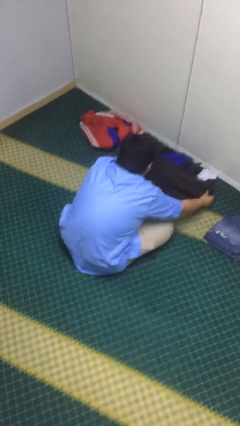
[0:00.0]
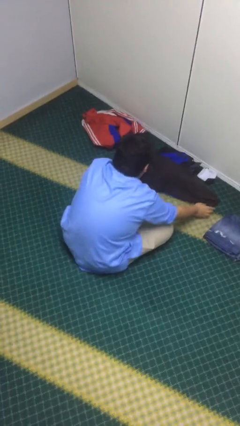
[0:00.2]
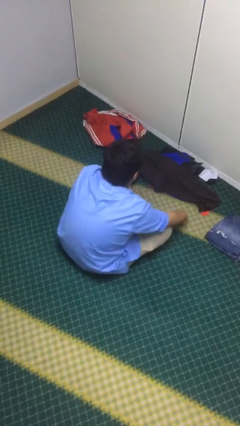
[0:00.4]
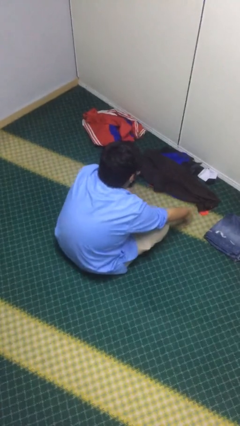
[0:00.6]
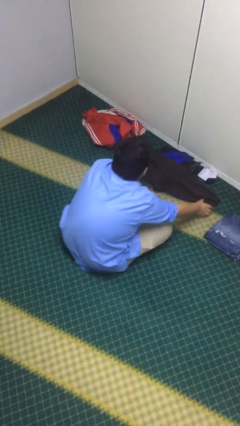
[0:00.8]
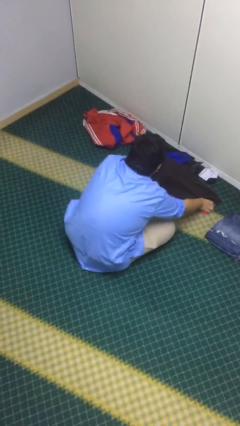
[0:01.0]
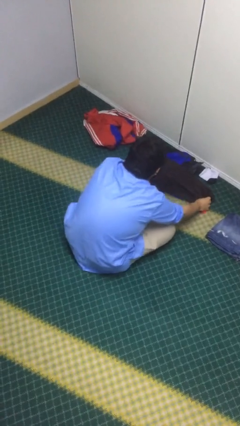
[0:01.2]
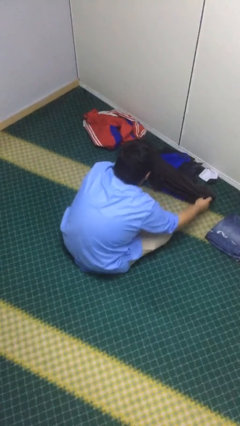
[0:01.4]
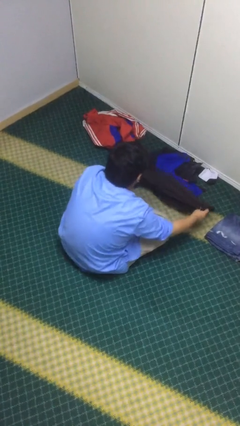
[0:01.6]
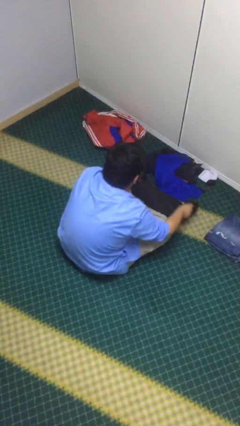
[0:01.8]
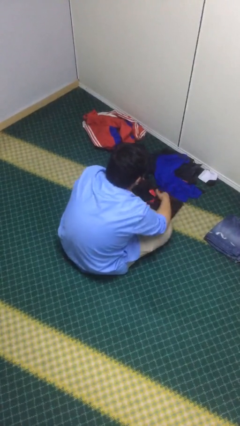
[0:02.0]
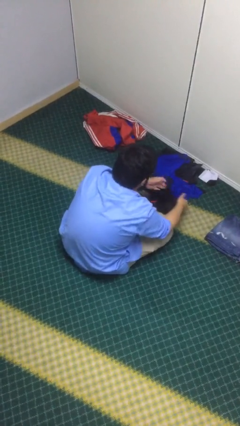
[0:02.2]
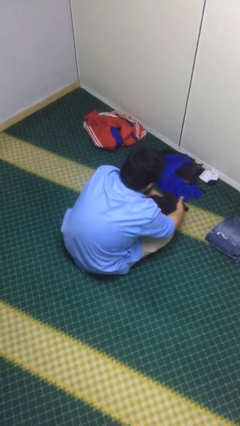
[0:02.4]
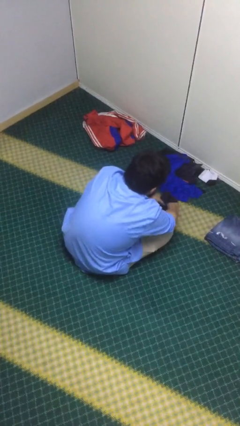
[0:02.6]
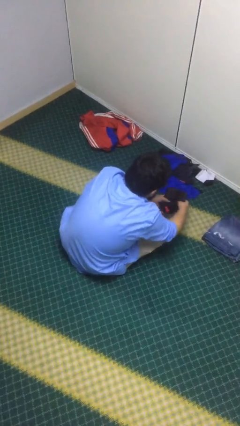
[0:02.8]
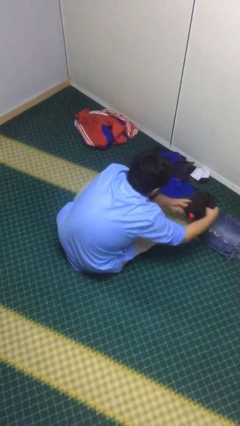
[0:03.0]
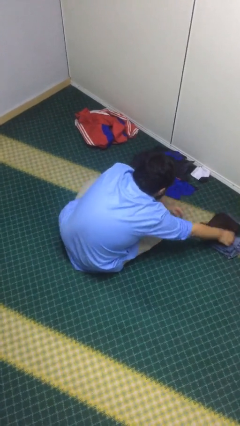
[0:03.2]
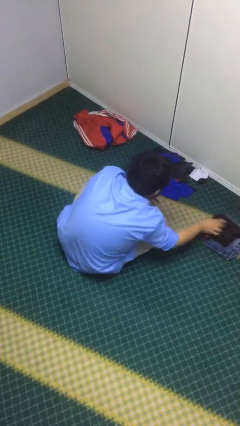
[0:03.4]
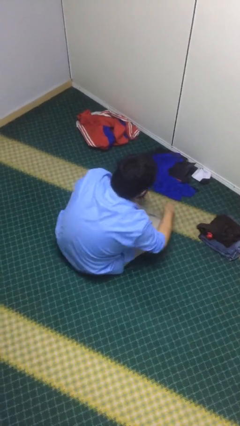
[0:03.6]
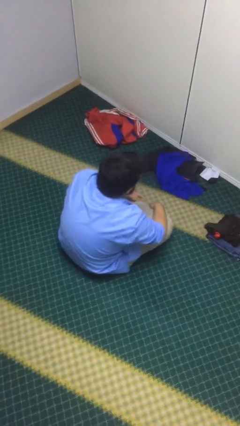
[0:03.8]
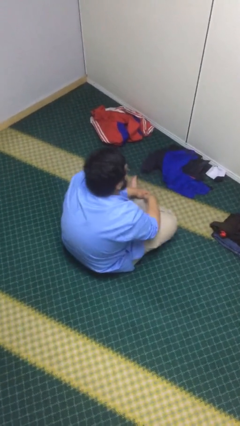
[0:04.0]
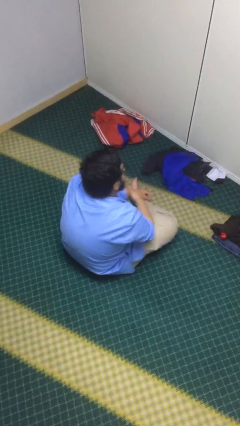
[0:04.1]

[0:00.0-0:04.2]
person folds shirt

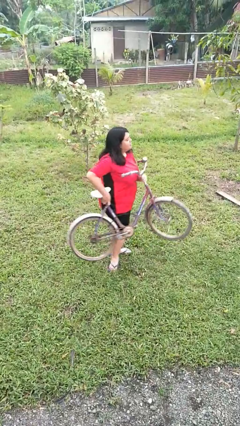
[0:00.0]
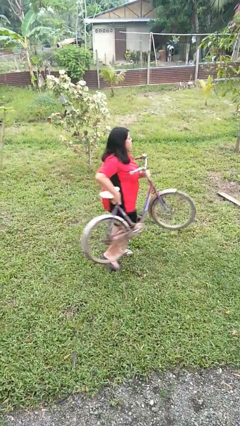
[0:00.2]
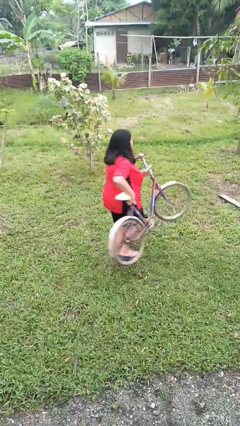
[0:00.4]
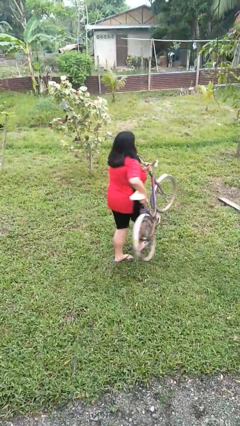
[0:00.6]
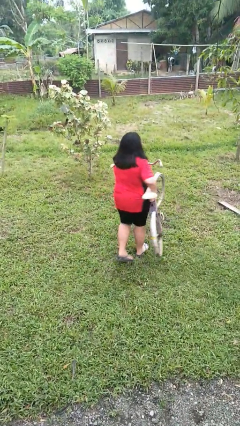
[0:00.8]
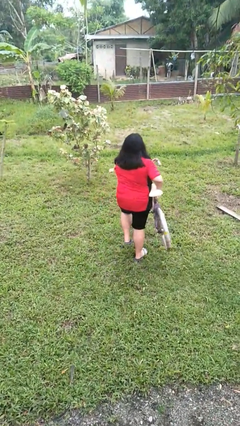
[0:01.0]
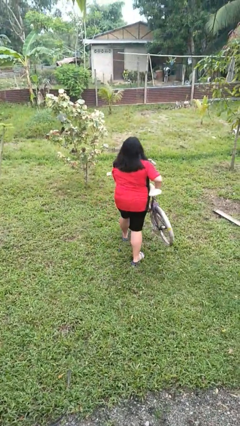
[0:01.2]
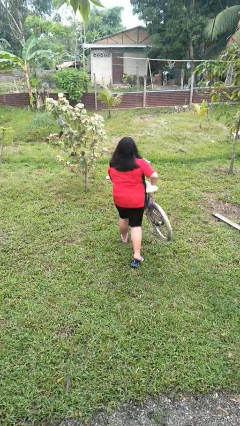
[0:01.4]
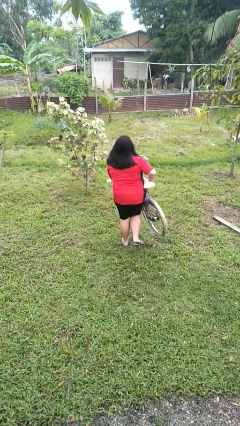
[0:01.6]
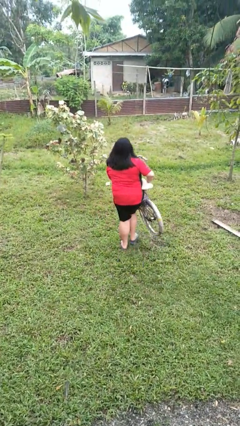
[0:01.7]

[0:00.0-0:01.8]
person carries bicycle

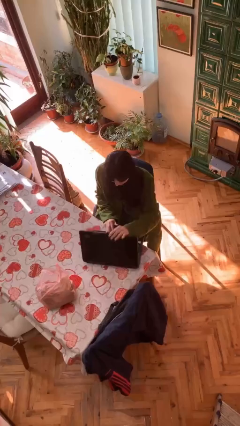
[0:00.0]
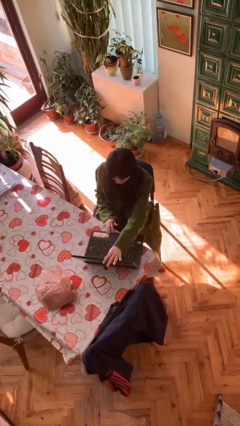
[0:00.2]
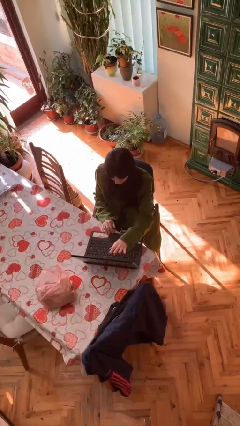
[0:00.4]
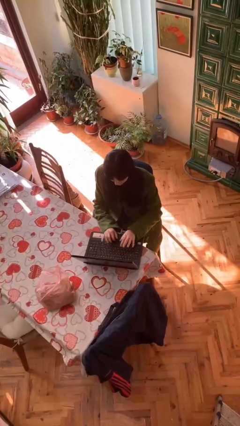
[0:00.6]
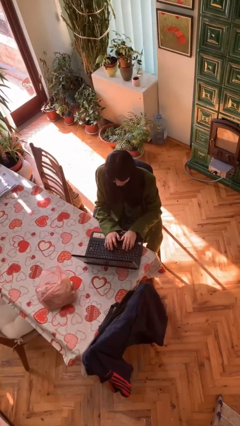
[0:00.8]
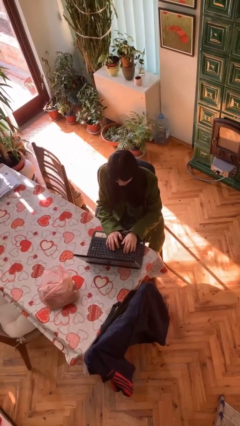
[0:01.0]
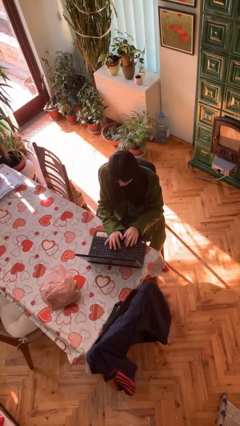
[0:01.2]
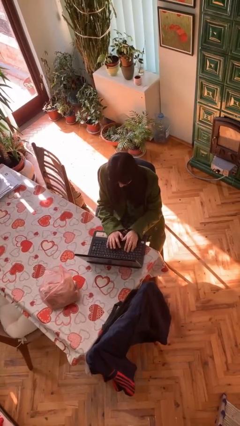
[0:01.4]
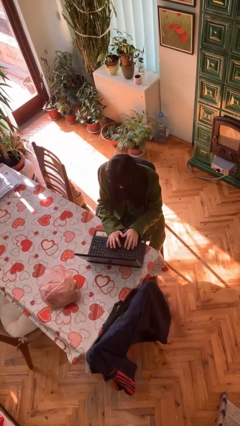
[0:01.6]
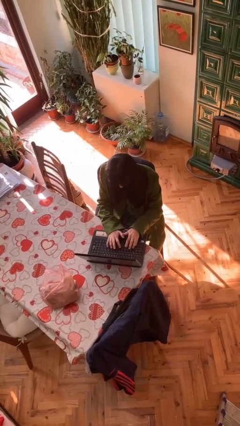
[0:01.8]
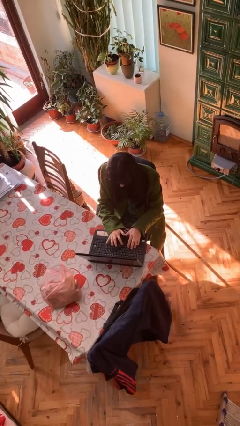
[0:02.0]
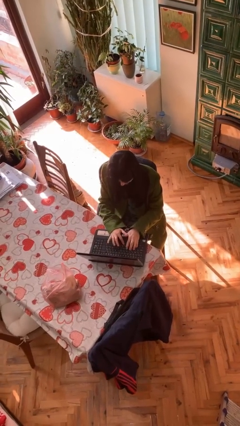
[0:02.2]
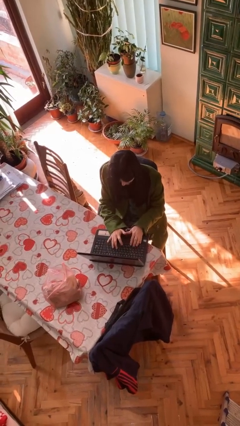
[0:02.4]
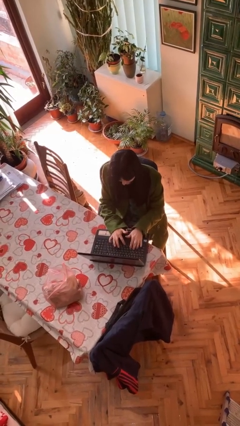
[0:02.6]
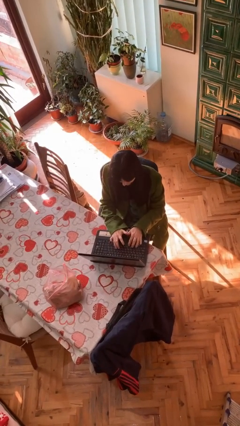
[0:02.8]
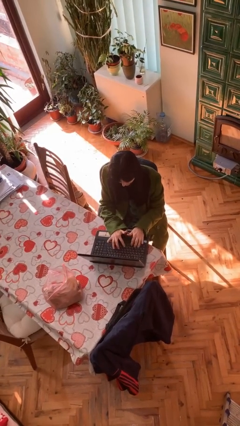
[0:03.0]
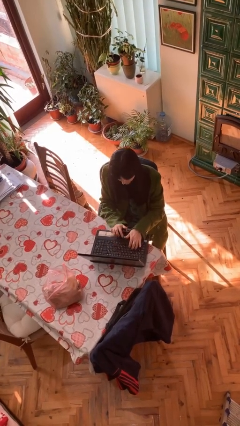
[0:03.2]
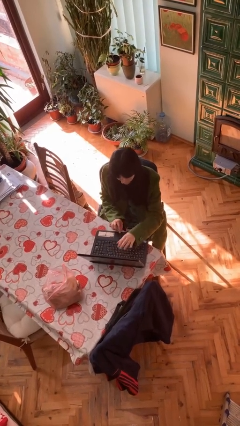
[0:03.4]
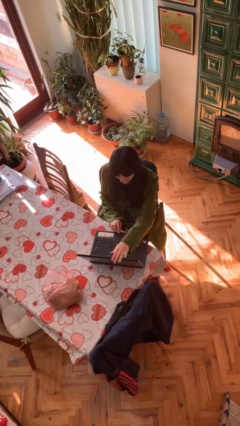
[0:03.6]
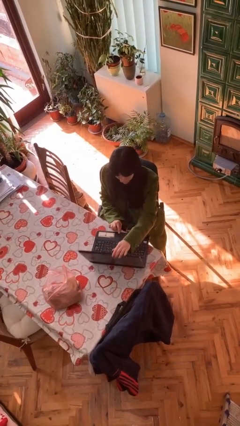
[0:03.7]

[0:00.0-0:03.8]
person interacts with laptop

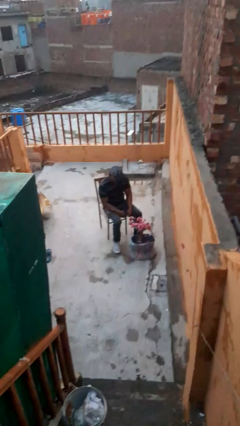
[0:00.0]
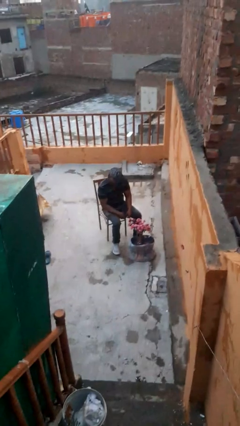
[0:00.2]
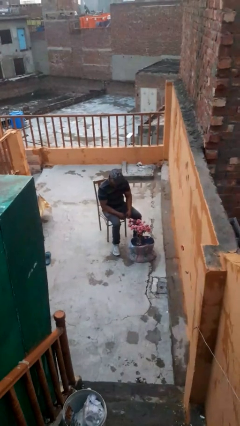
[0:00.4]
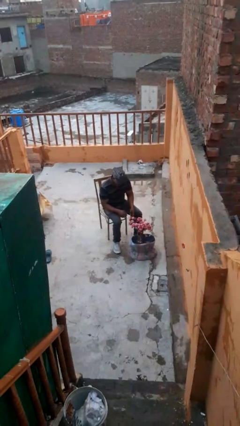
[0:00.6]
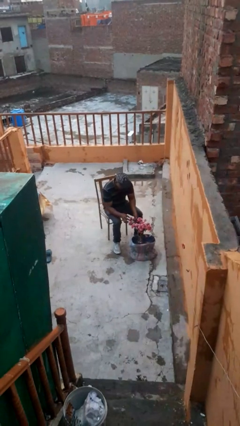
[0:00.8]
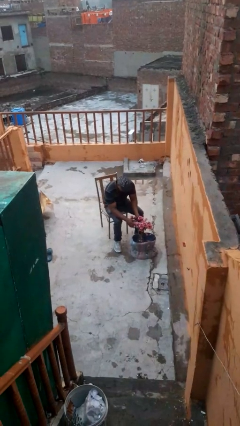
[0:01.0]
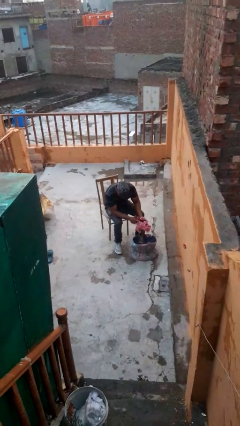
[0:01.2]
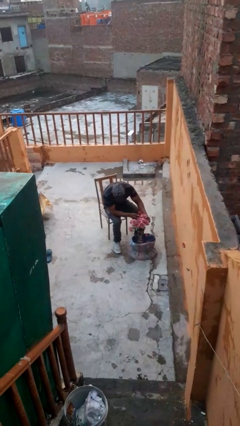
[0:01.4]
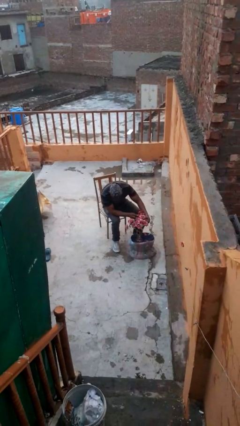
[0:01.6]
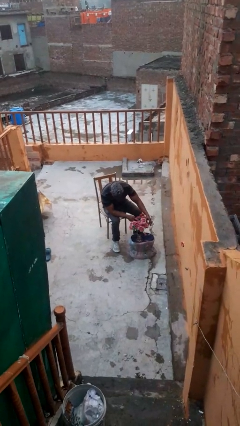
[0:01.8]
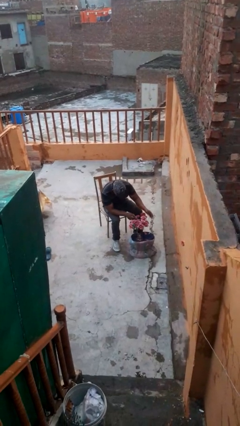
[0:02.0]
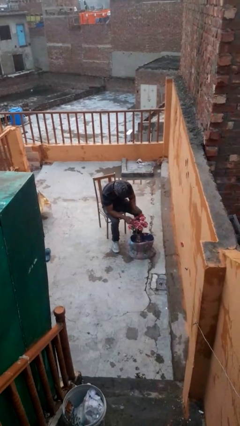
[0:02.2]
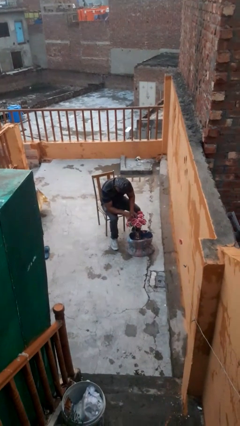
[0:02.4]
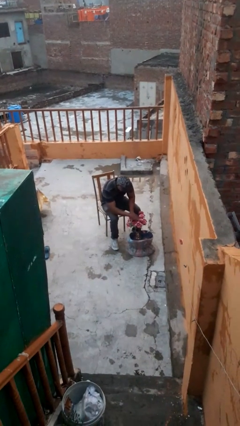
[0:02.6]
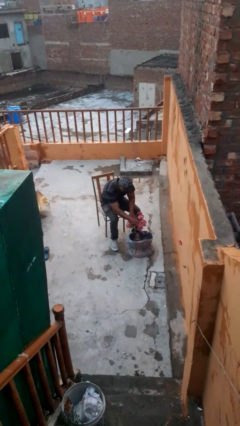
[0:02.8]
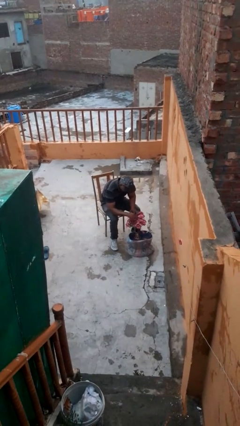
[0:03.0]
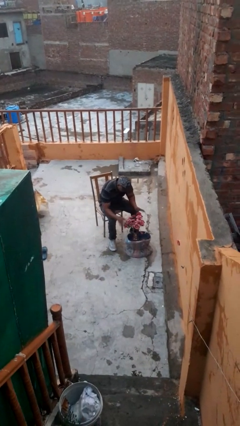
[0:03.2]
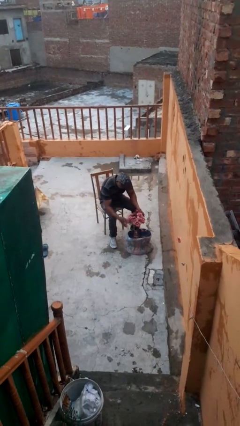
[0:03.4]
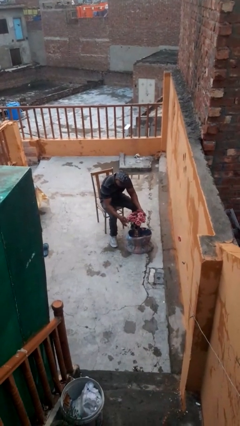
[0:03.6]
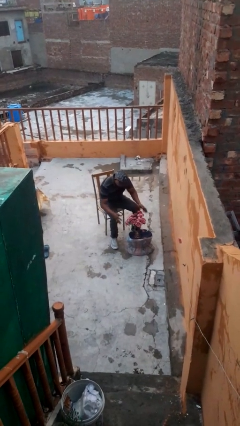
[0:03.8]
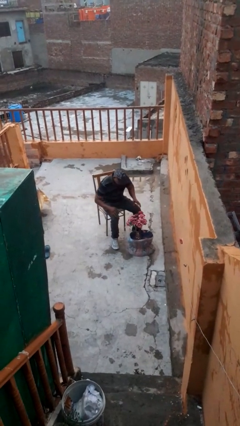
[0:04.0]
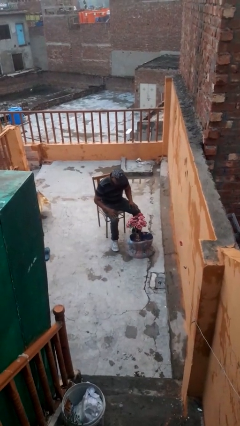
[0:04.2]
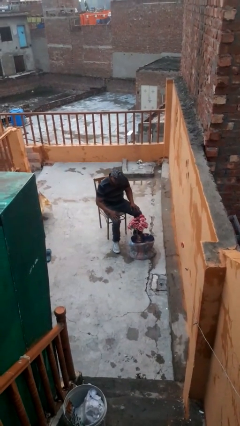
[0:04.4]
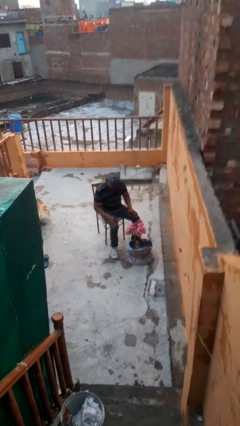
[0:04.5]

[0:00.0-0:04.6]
person arranges flowers in vase

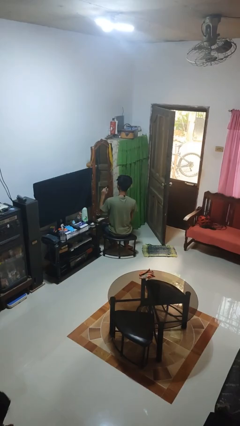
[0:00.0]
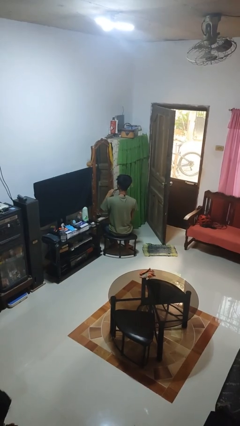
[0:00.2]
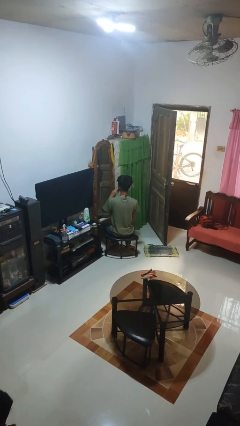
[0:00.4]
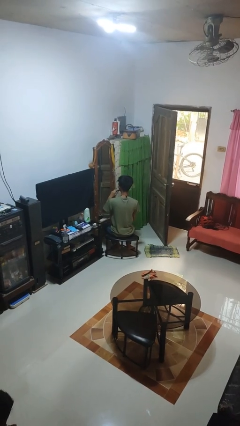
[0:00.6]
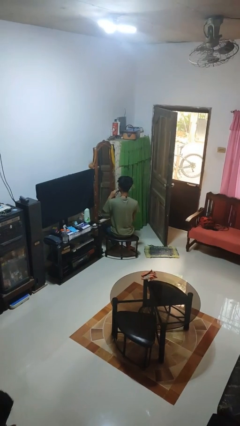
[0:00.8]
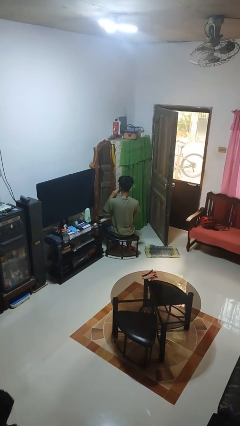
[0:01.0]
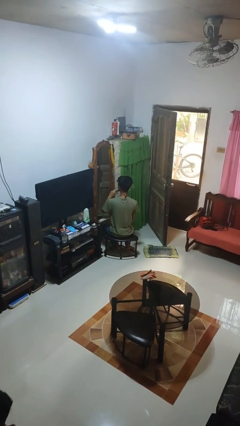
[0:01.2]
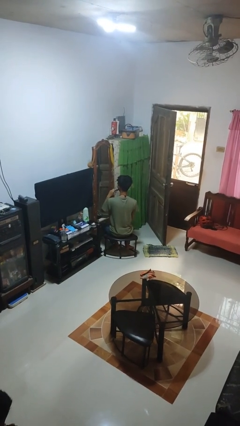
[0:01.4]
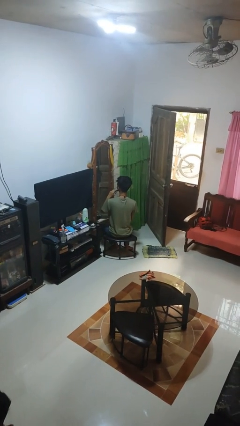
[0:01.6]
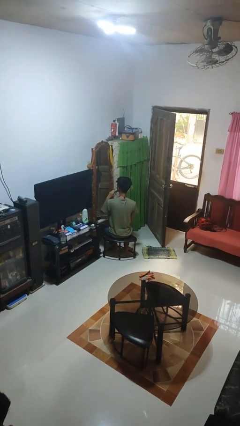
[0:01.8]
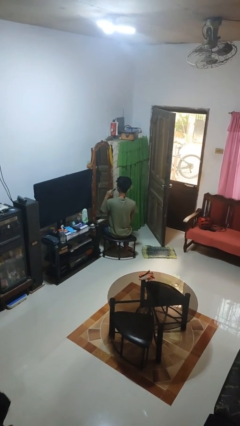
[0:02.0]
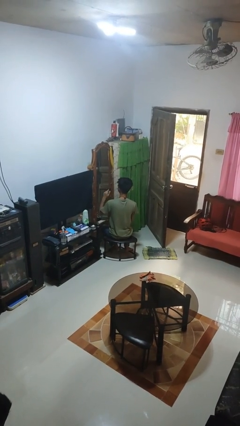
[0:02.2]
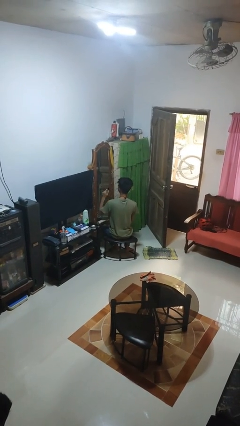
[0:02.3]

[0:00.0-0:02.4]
person applies lip makeup

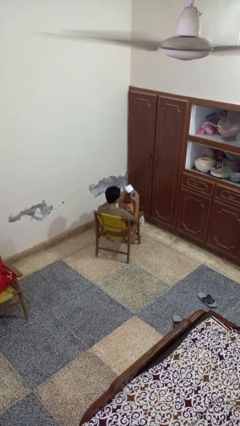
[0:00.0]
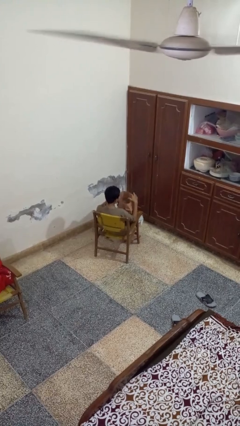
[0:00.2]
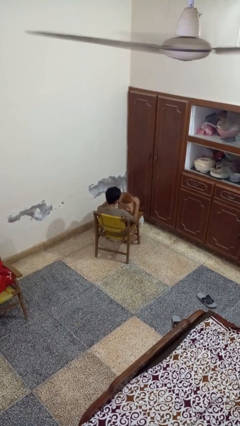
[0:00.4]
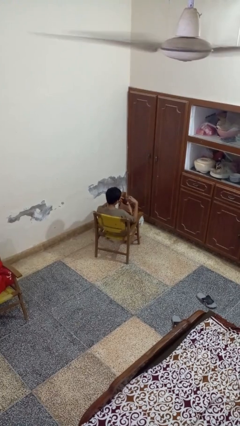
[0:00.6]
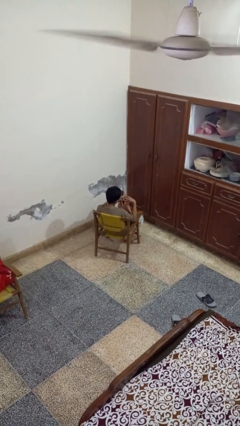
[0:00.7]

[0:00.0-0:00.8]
person puts object into bag
